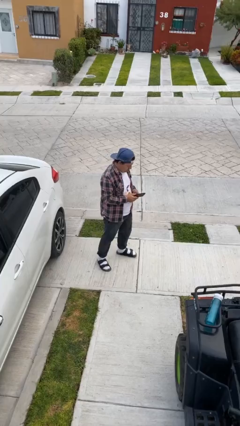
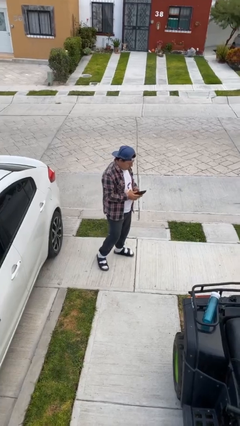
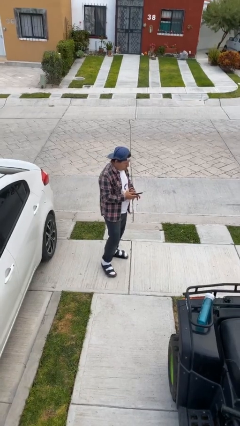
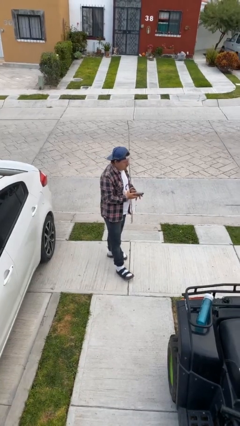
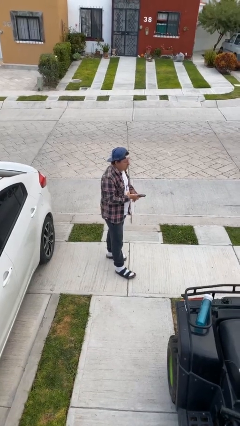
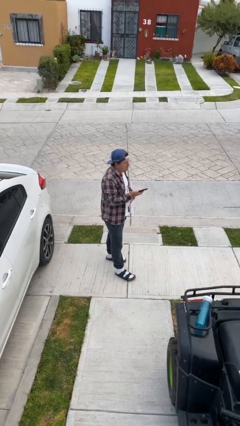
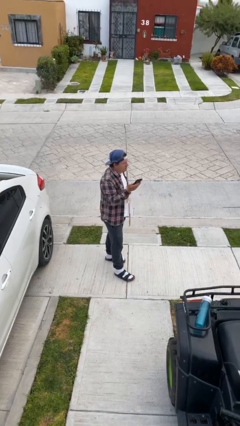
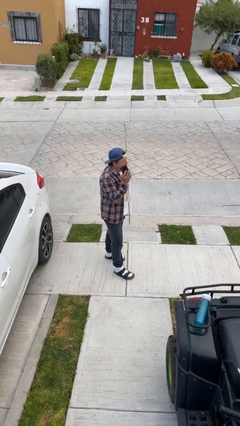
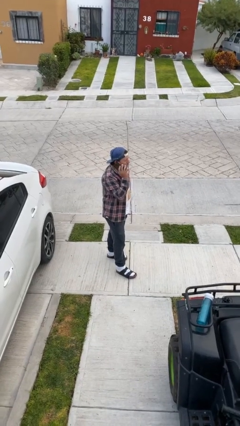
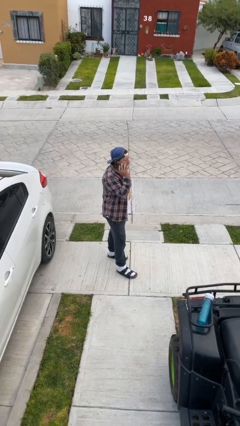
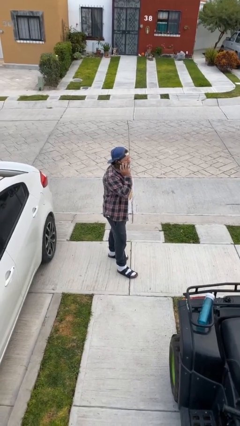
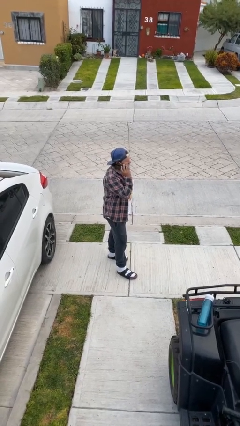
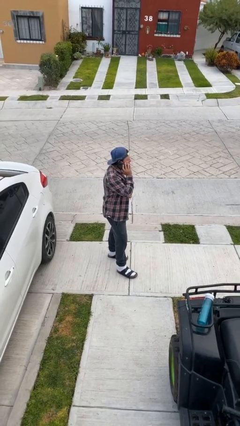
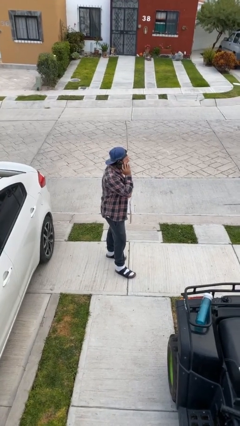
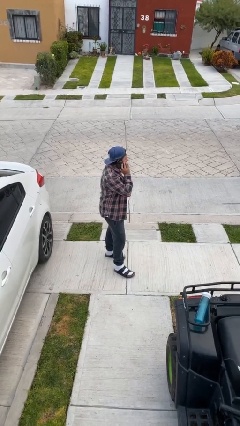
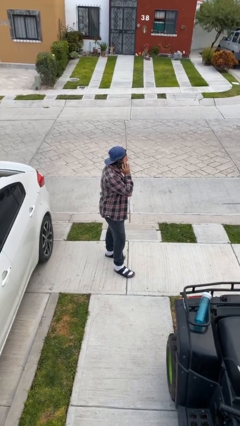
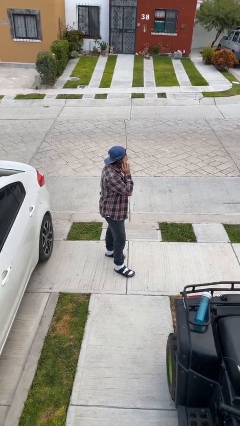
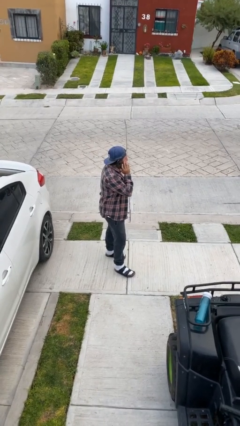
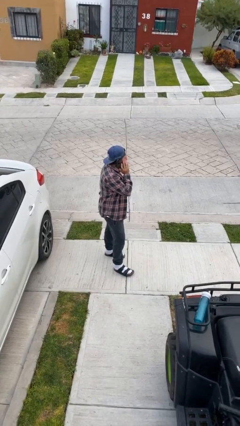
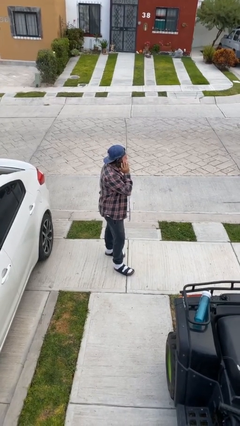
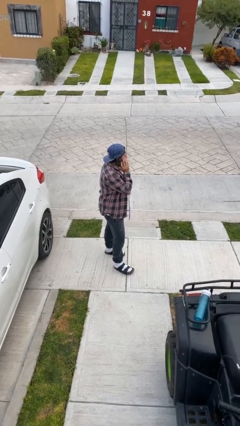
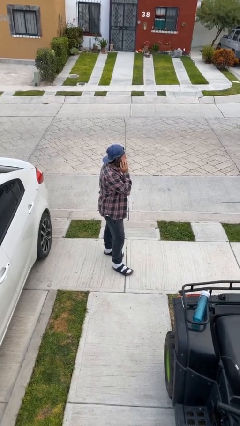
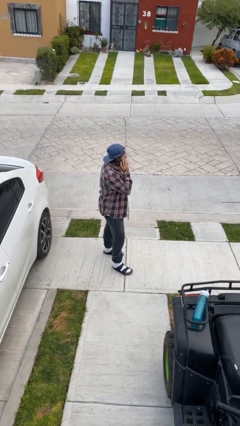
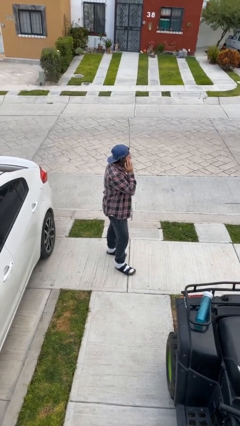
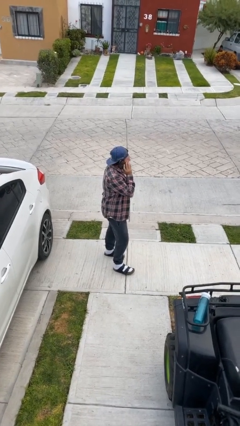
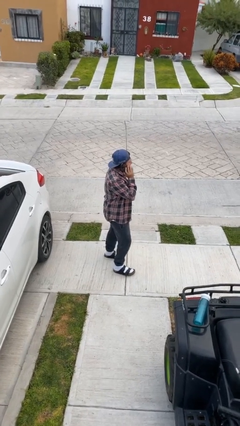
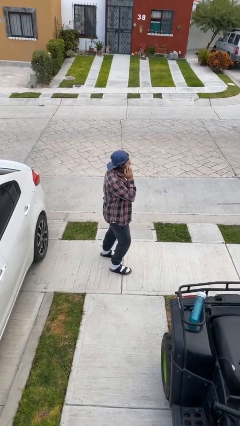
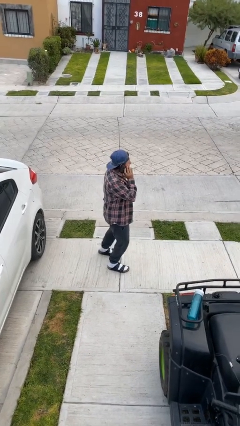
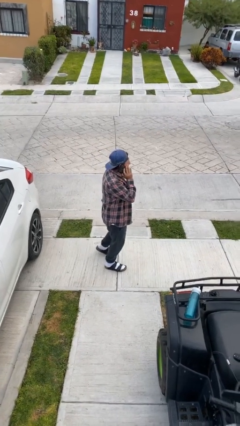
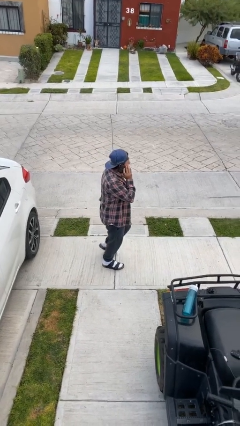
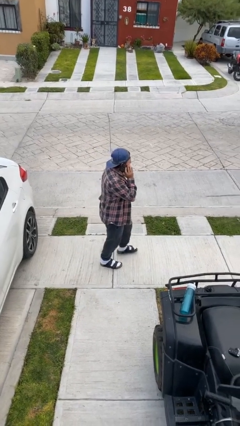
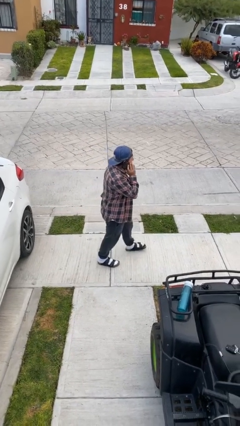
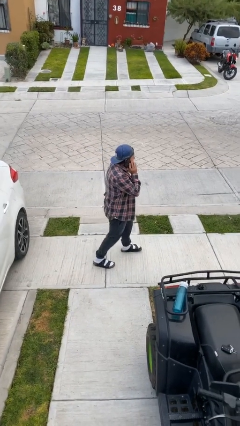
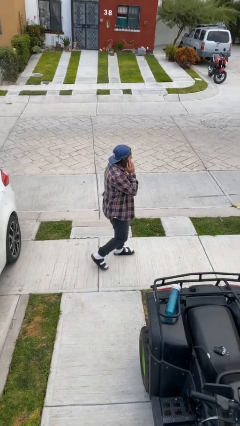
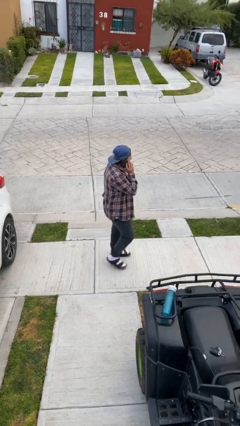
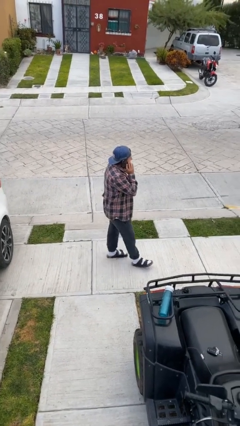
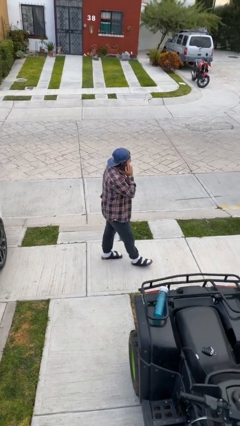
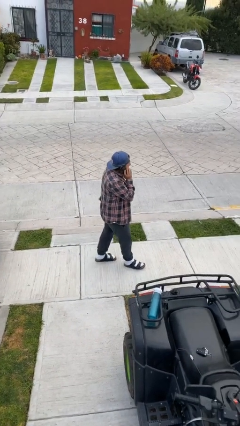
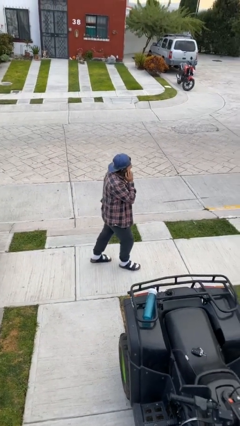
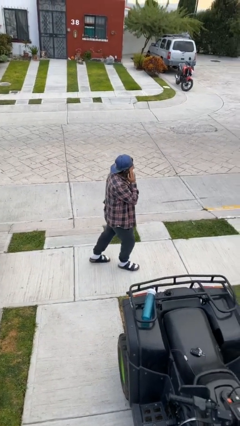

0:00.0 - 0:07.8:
person talks on phone

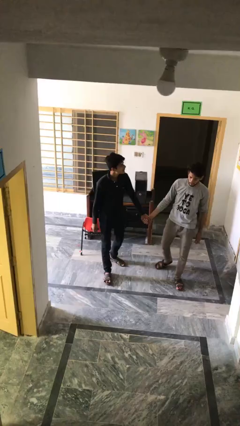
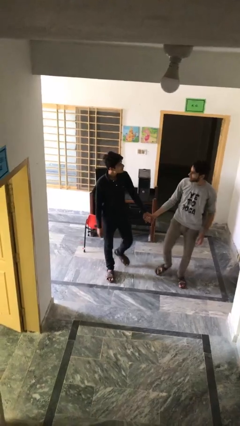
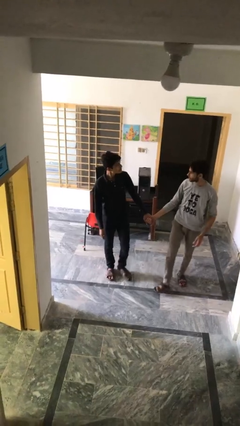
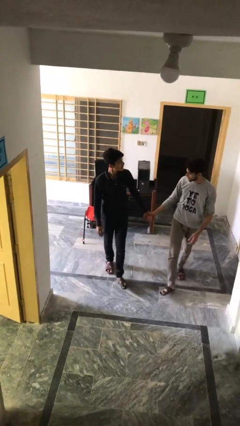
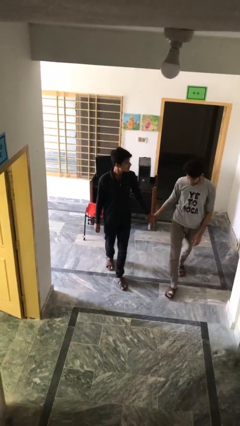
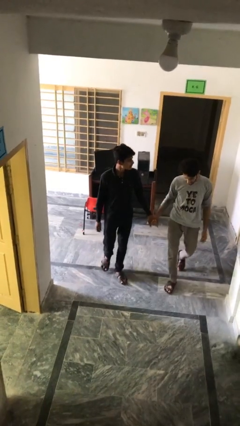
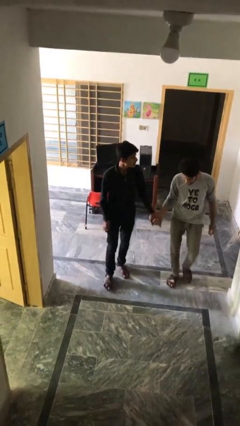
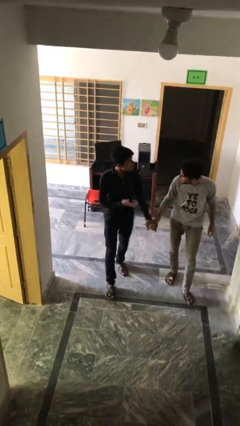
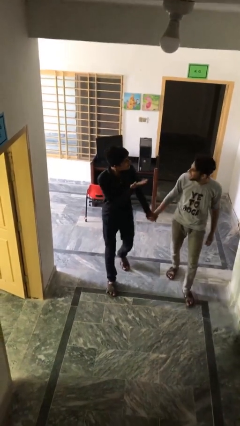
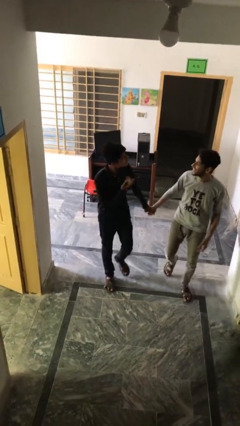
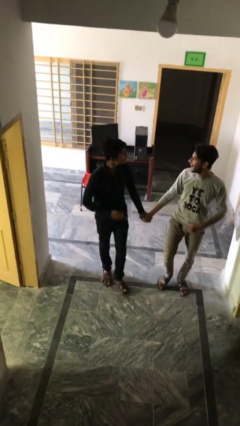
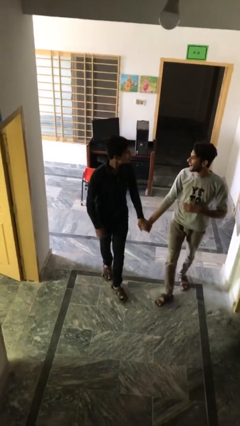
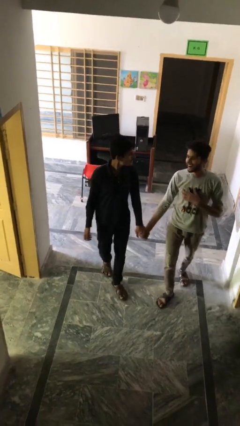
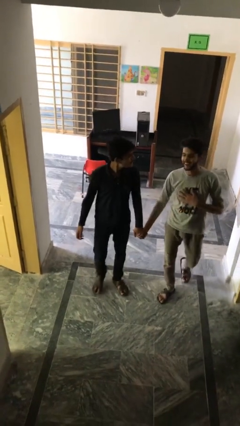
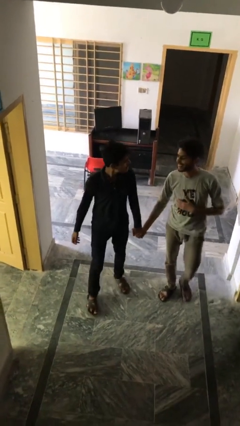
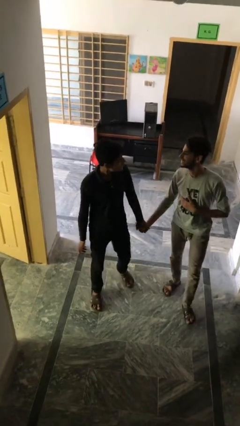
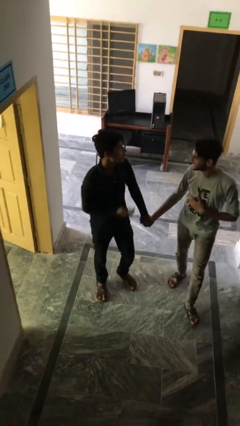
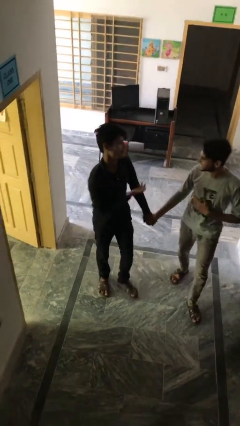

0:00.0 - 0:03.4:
person holds hand

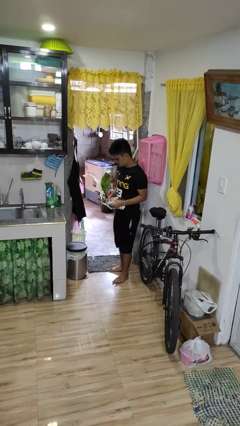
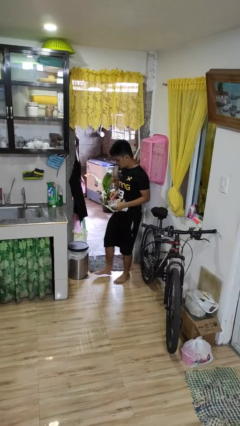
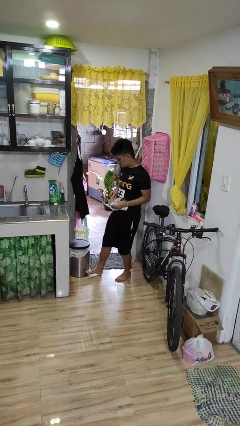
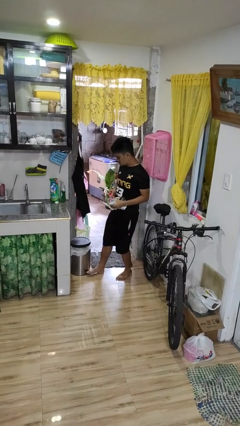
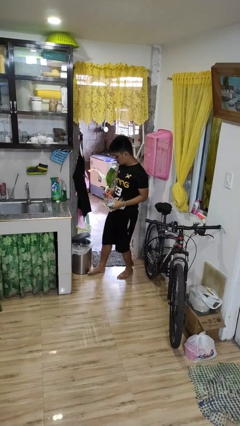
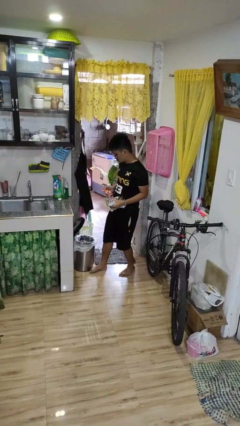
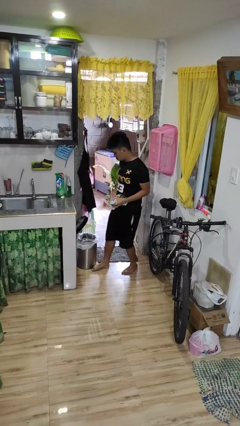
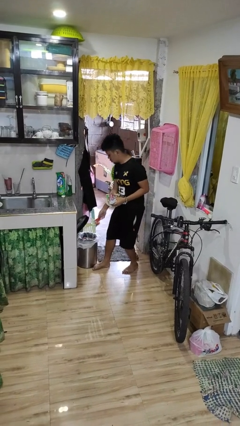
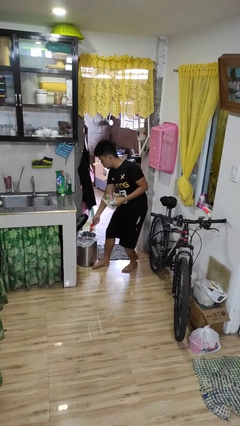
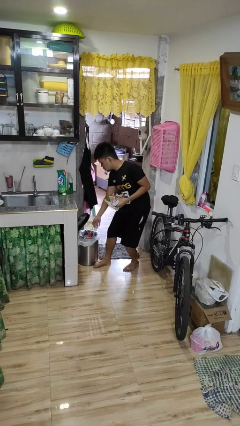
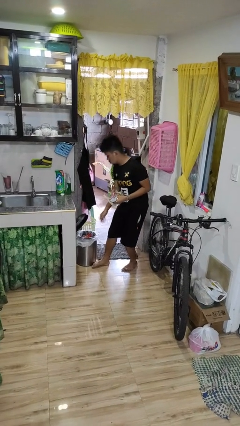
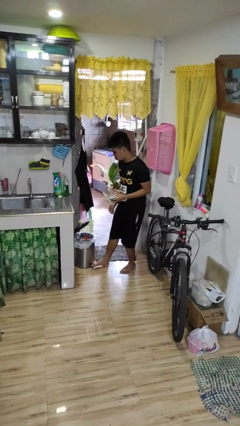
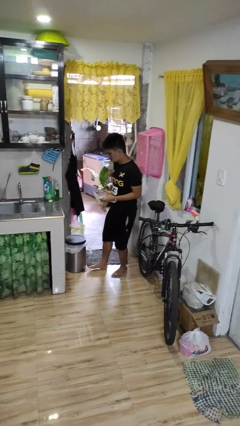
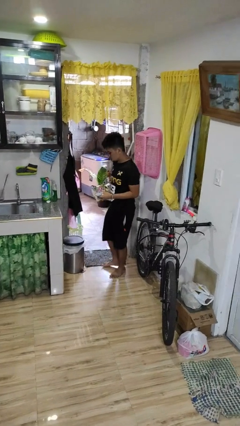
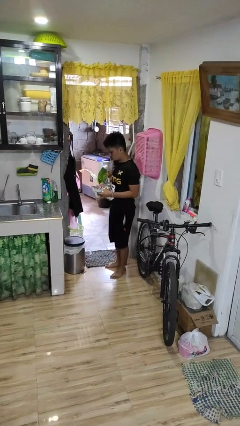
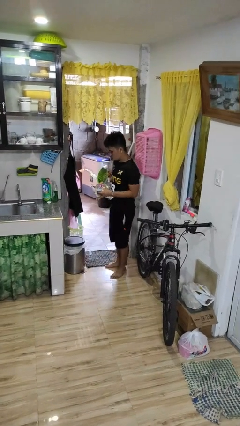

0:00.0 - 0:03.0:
person discards trash

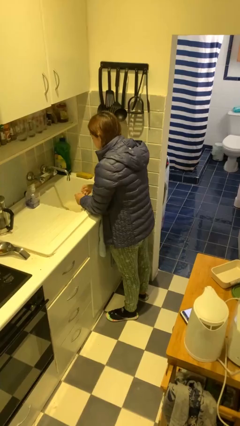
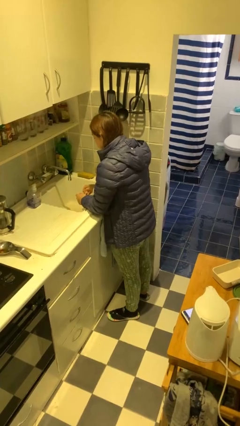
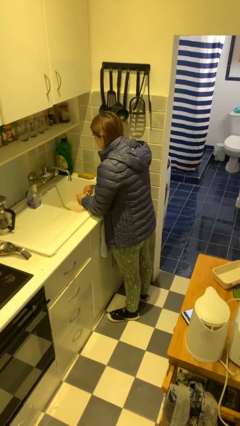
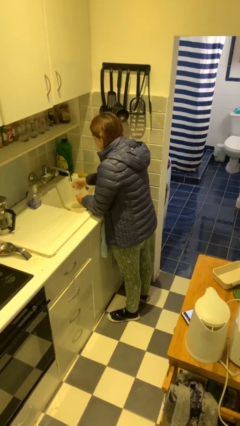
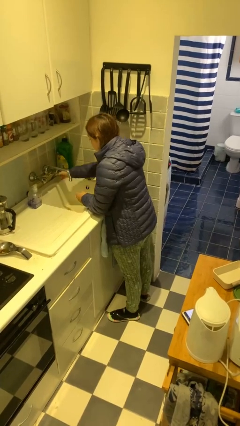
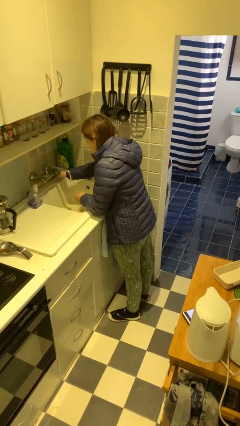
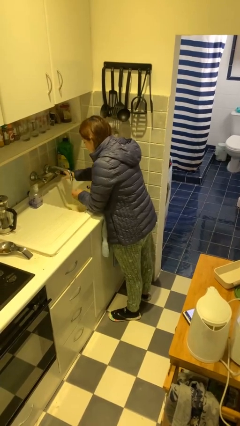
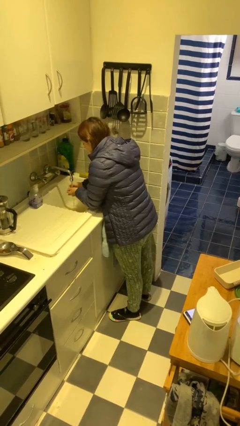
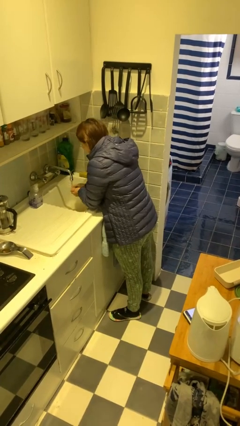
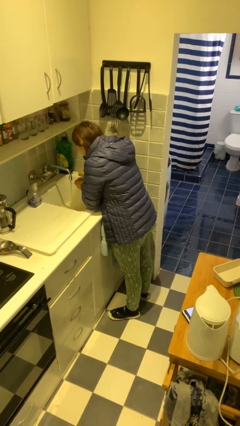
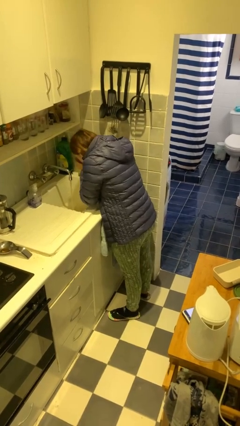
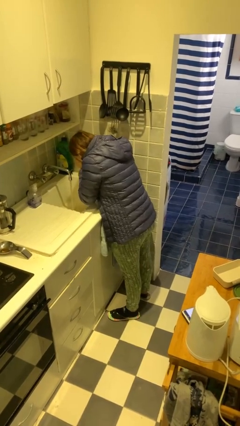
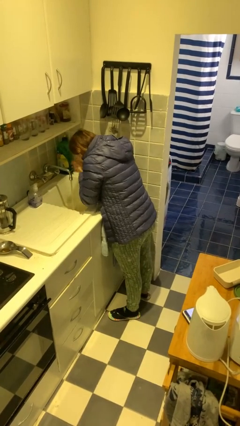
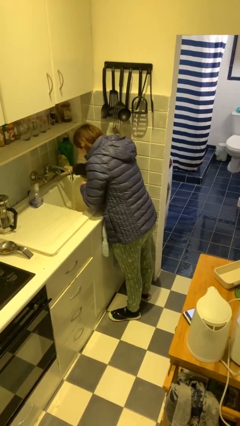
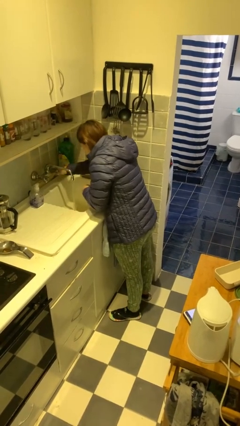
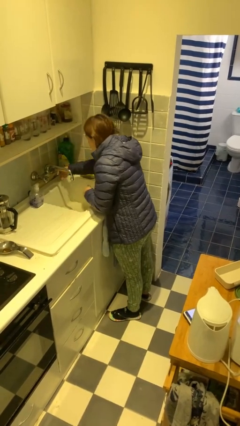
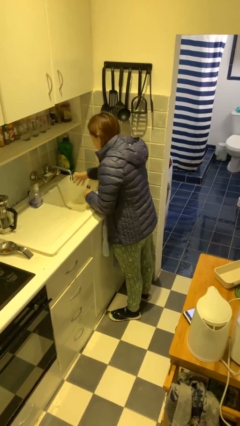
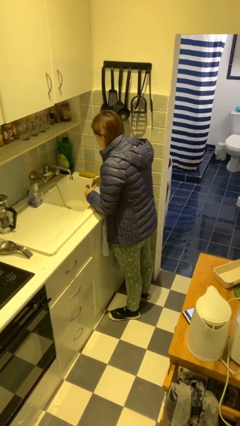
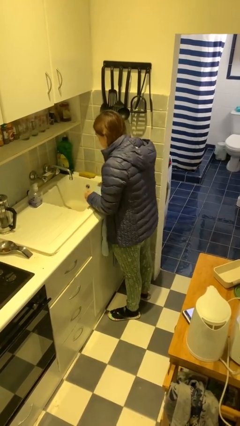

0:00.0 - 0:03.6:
person washes face
